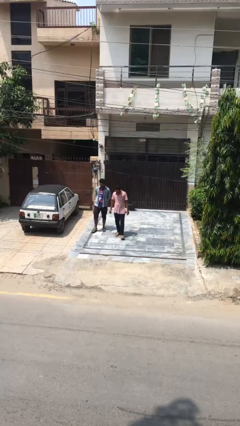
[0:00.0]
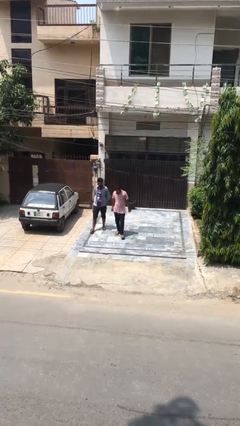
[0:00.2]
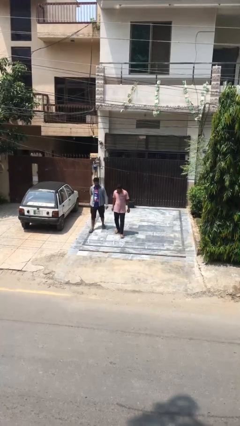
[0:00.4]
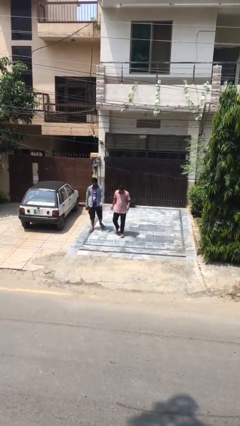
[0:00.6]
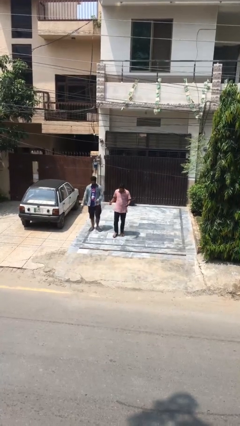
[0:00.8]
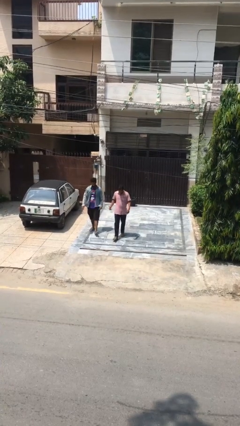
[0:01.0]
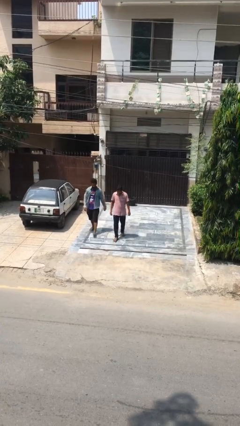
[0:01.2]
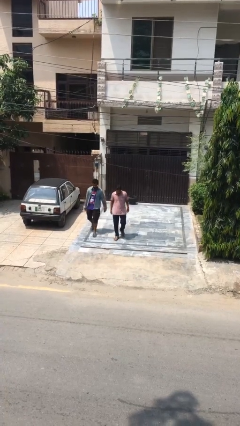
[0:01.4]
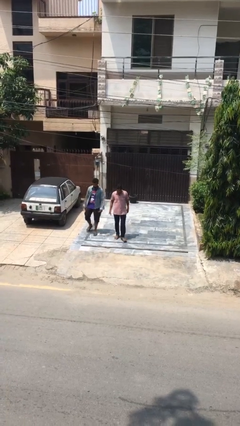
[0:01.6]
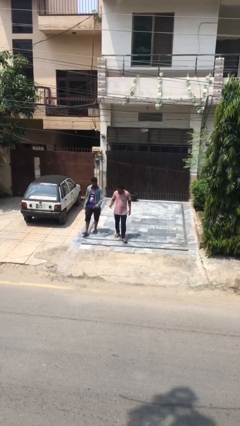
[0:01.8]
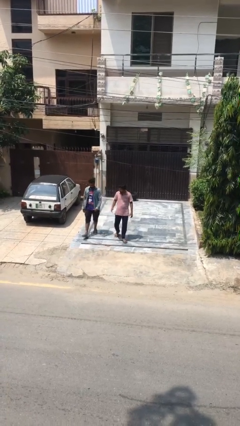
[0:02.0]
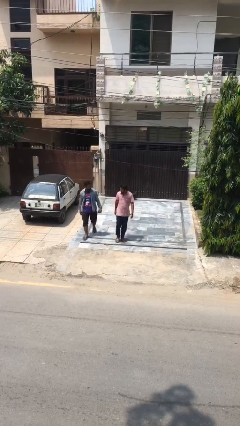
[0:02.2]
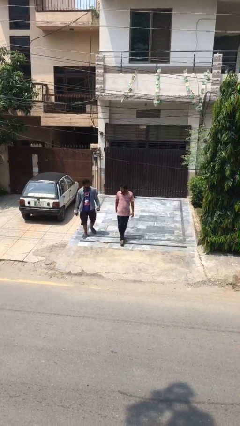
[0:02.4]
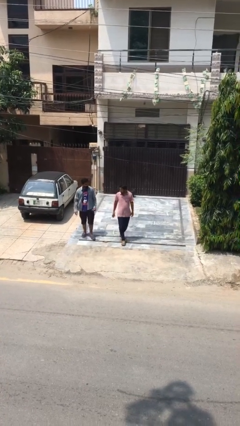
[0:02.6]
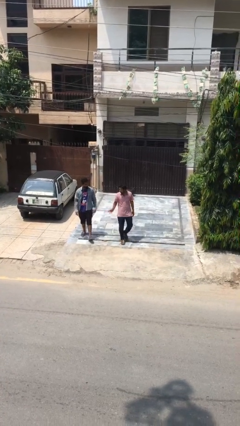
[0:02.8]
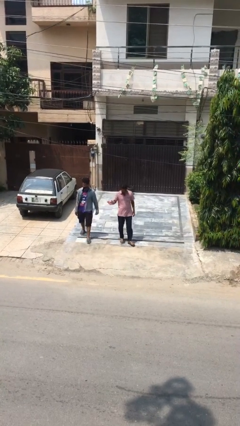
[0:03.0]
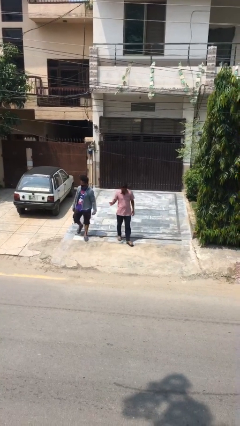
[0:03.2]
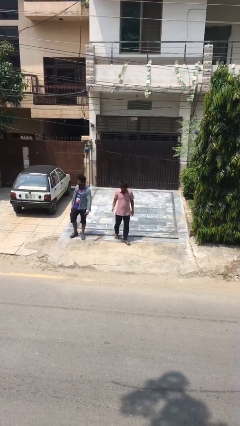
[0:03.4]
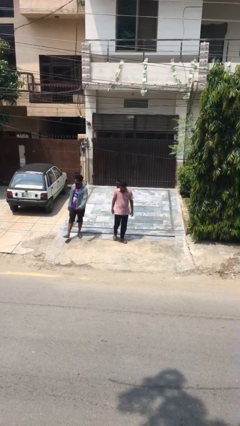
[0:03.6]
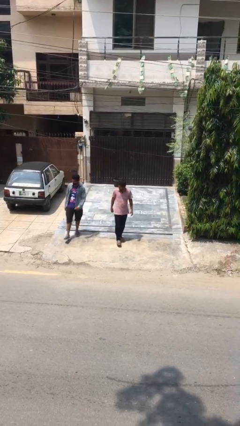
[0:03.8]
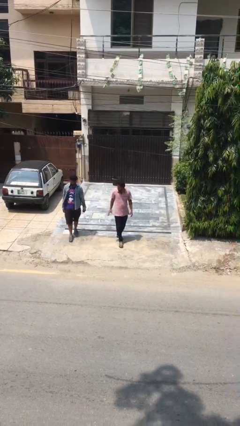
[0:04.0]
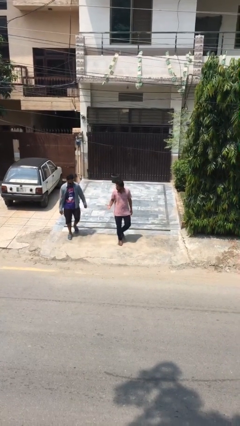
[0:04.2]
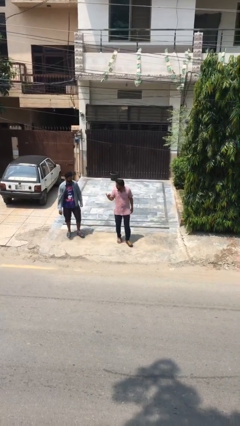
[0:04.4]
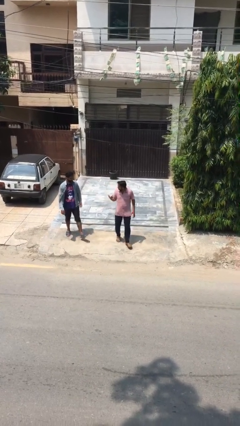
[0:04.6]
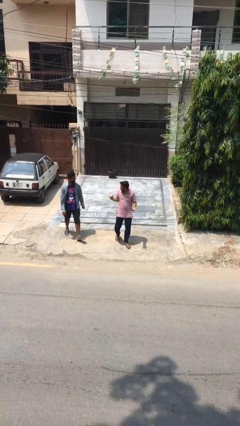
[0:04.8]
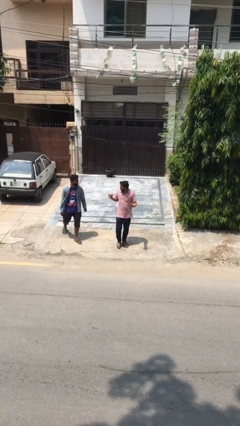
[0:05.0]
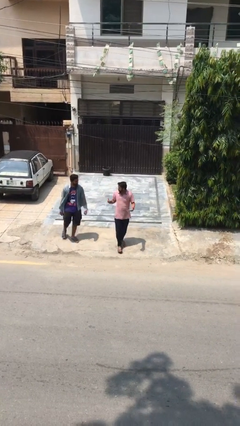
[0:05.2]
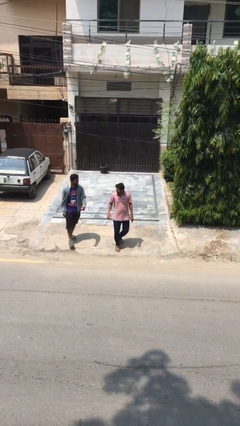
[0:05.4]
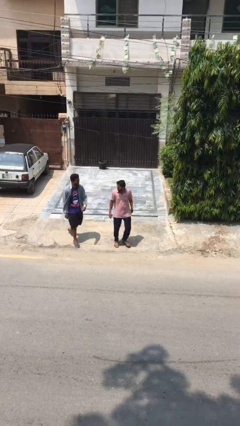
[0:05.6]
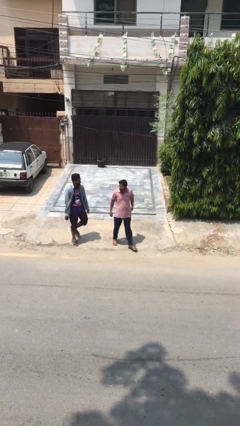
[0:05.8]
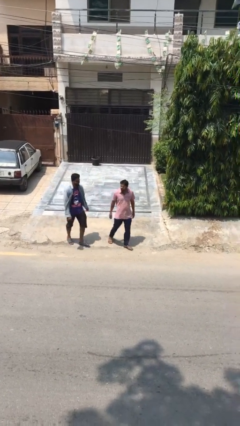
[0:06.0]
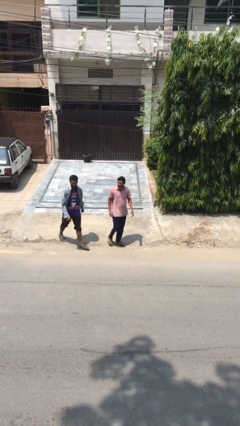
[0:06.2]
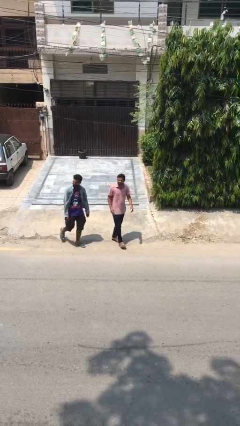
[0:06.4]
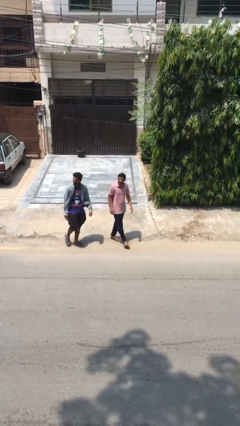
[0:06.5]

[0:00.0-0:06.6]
person talks to person

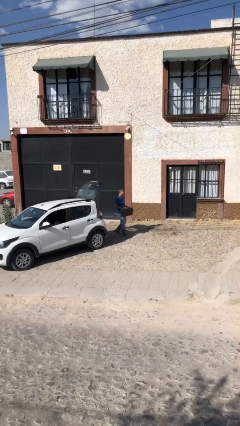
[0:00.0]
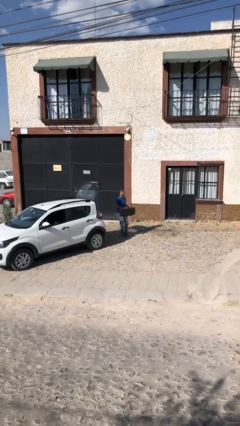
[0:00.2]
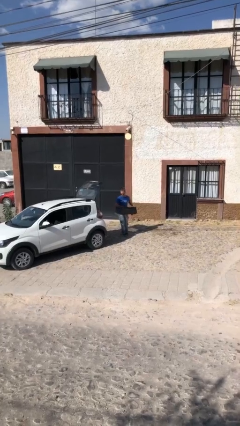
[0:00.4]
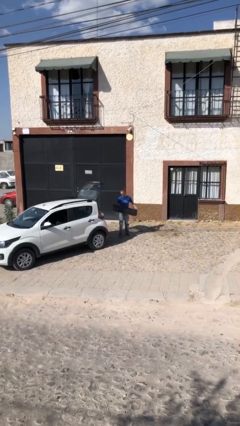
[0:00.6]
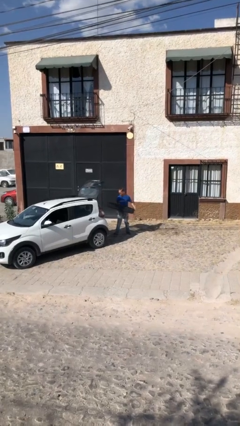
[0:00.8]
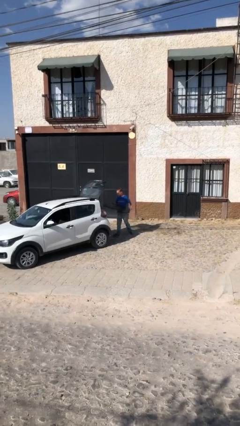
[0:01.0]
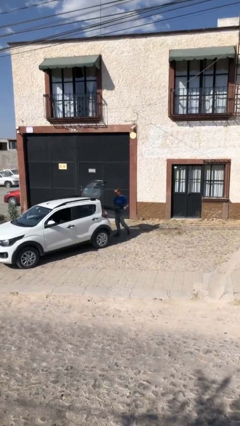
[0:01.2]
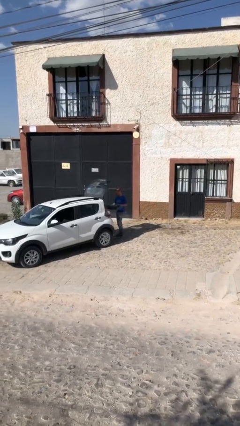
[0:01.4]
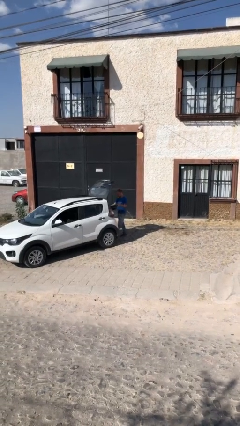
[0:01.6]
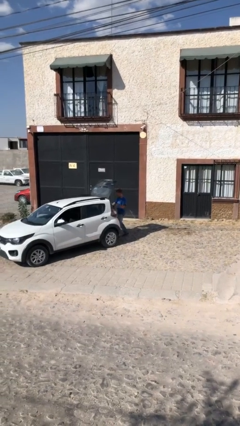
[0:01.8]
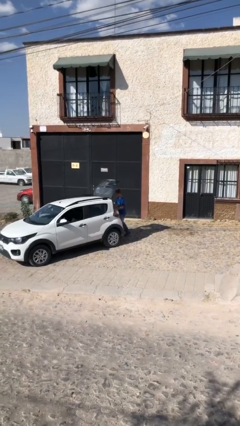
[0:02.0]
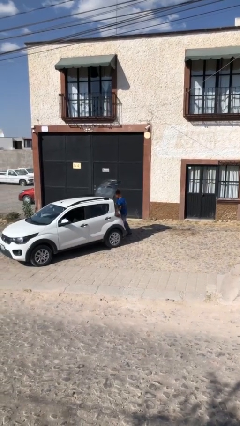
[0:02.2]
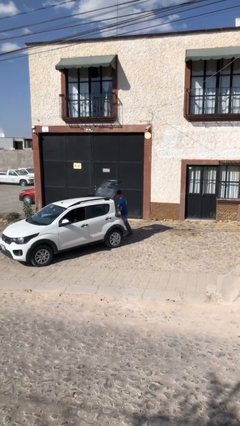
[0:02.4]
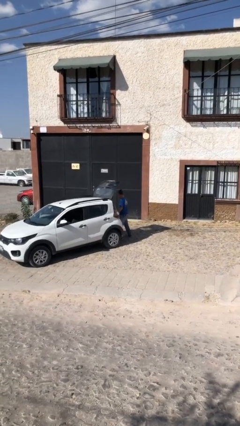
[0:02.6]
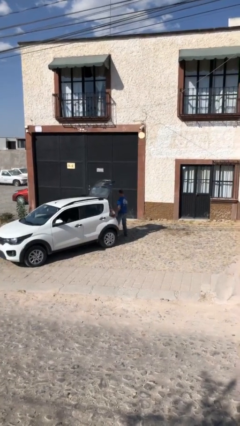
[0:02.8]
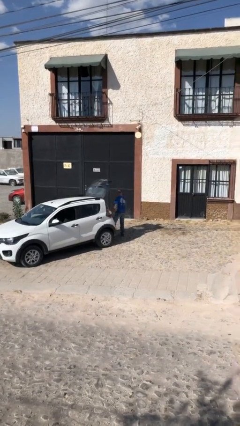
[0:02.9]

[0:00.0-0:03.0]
person loads car

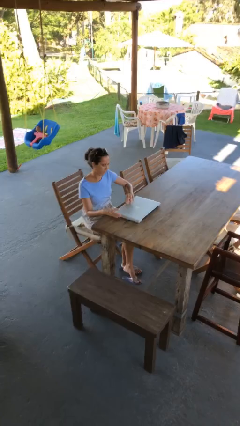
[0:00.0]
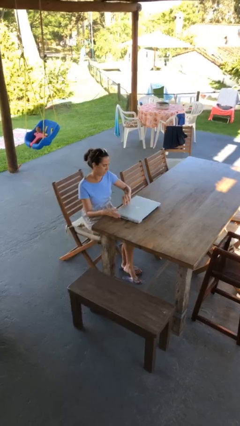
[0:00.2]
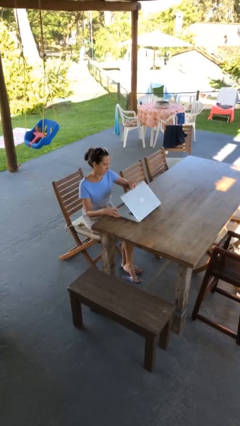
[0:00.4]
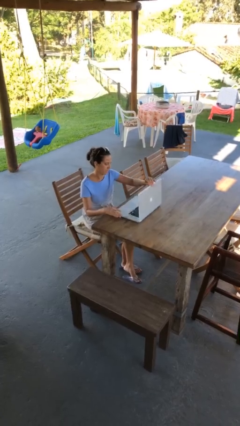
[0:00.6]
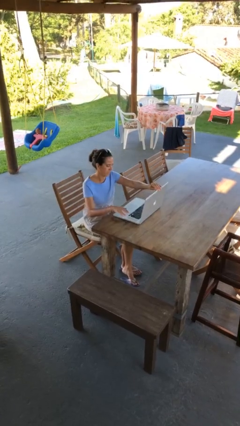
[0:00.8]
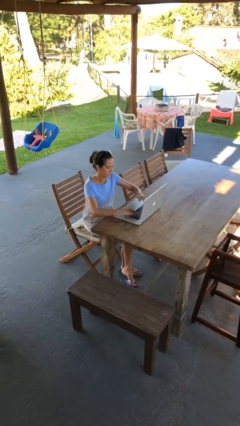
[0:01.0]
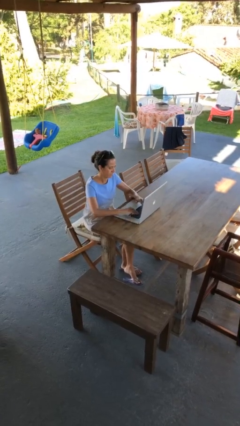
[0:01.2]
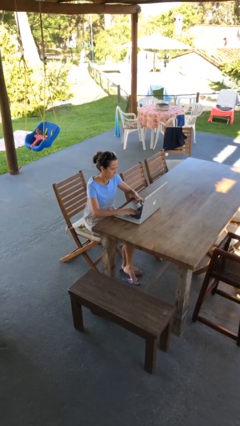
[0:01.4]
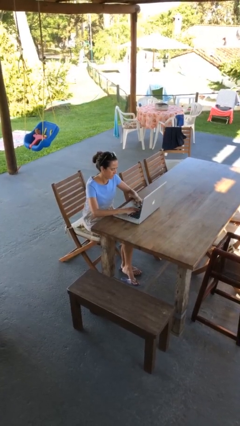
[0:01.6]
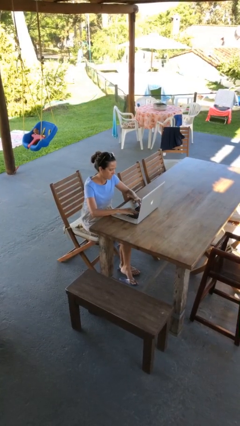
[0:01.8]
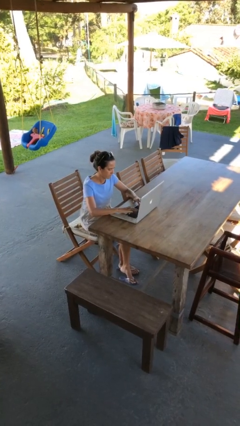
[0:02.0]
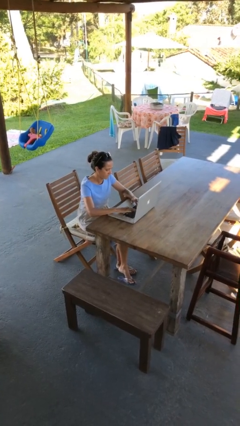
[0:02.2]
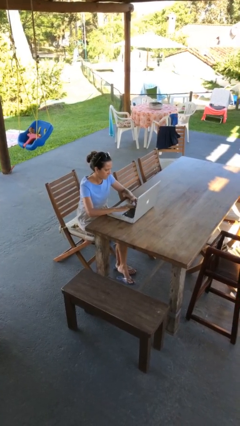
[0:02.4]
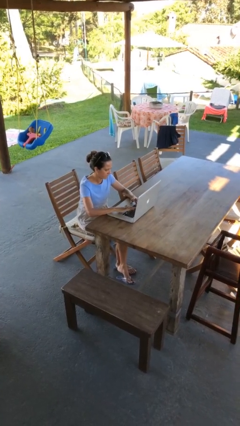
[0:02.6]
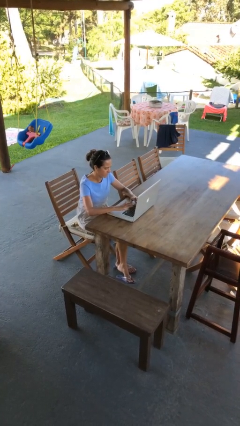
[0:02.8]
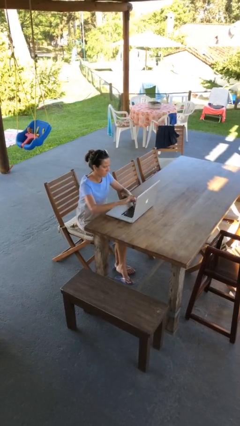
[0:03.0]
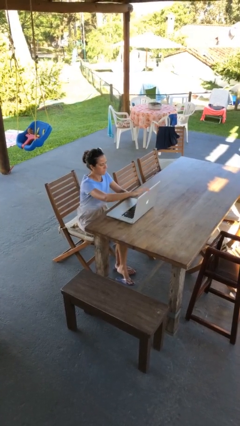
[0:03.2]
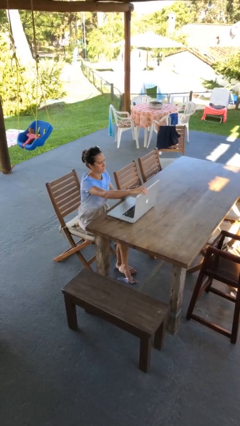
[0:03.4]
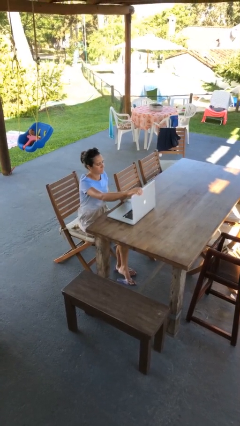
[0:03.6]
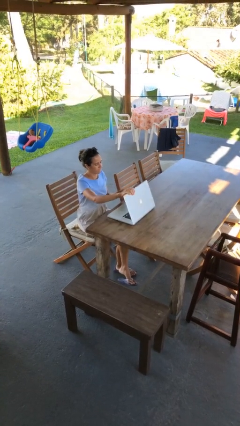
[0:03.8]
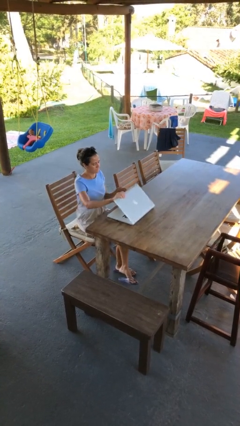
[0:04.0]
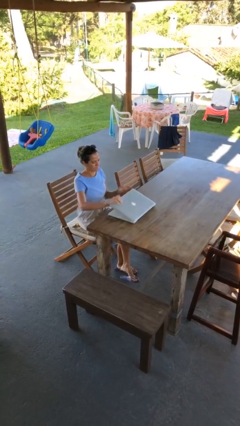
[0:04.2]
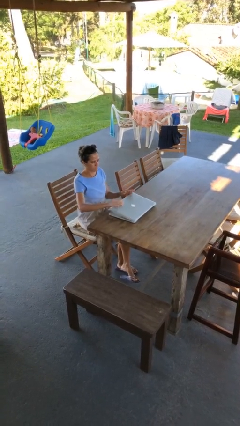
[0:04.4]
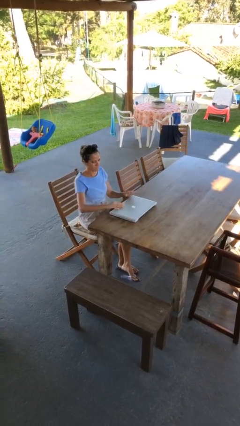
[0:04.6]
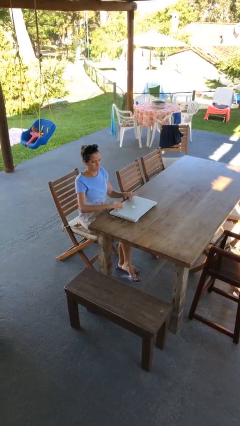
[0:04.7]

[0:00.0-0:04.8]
person interacts with laptop

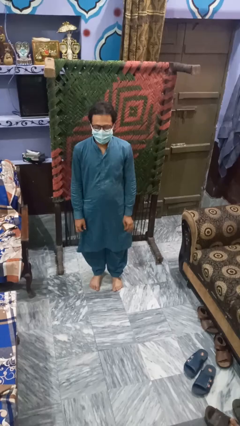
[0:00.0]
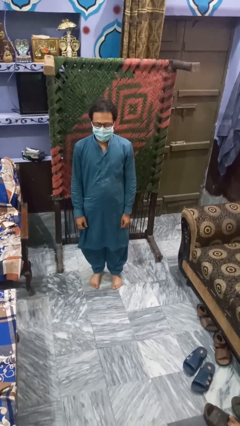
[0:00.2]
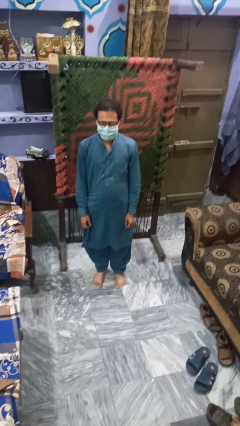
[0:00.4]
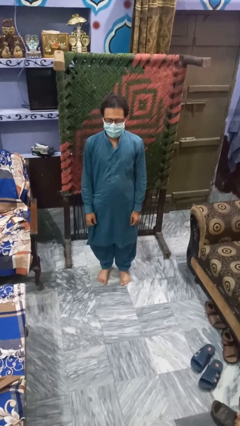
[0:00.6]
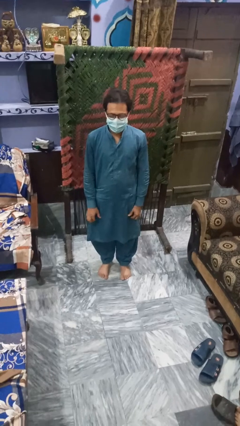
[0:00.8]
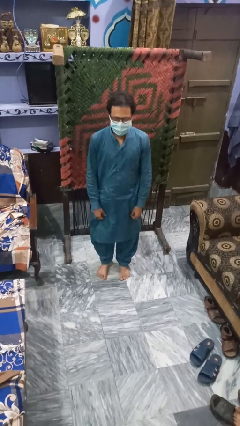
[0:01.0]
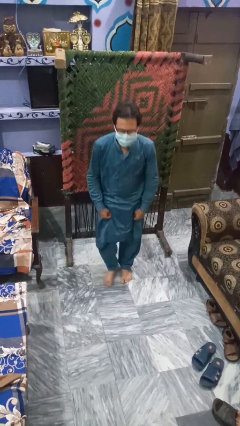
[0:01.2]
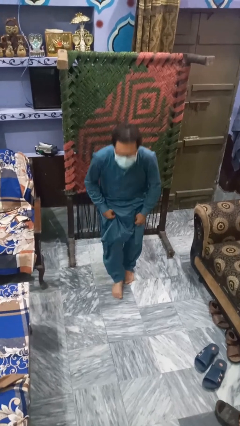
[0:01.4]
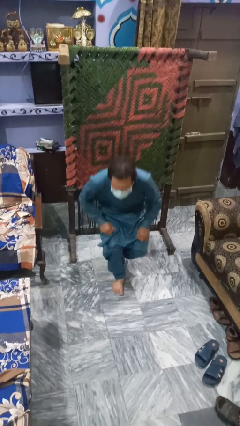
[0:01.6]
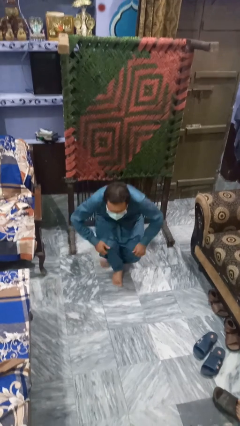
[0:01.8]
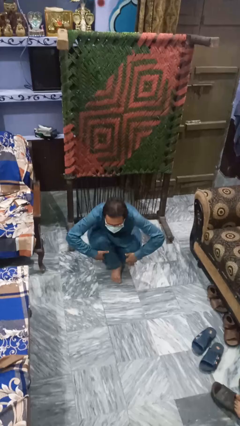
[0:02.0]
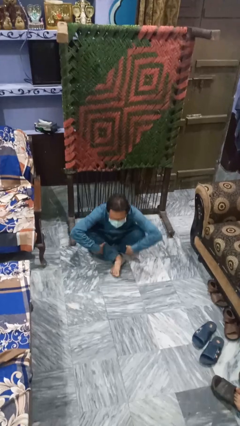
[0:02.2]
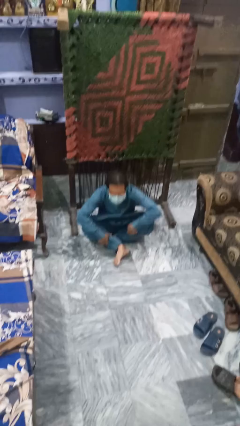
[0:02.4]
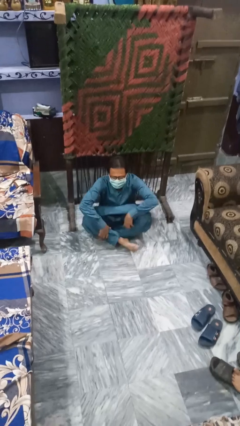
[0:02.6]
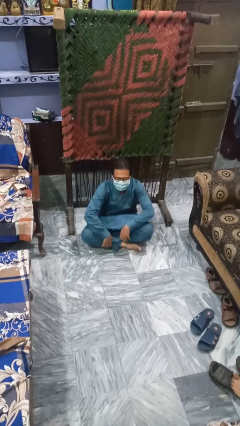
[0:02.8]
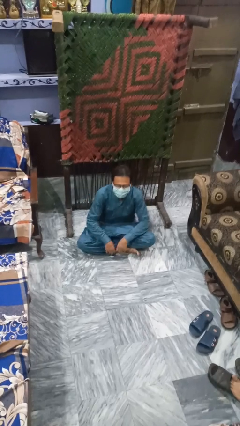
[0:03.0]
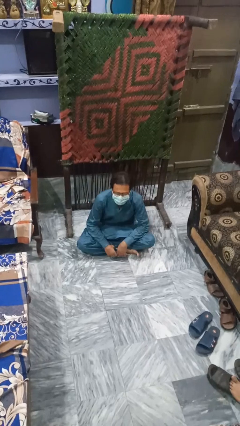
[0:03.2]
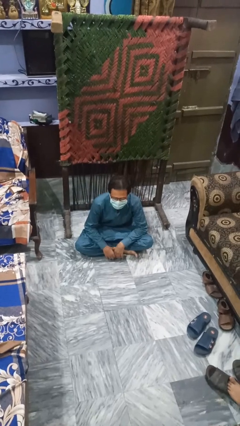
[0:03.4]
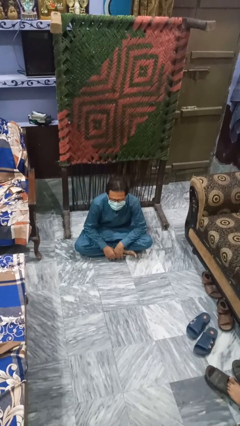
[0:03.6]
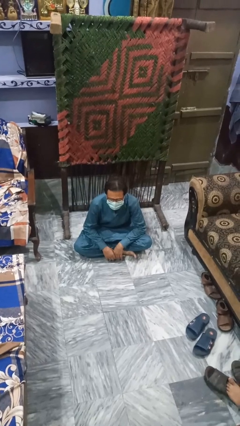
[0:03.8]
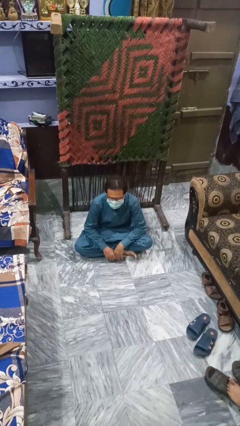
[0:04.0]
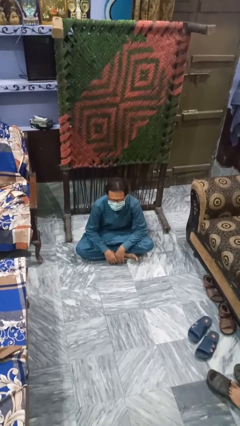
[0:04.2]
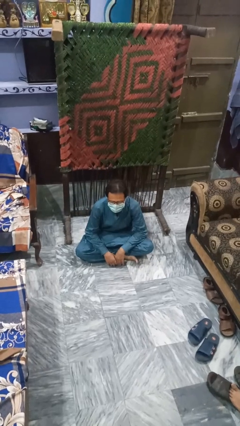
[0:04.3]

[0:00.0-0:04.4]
person sits crisscross
